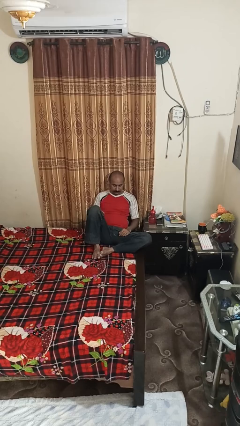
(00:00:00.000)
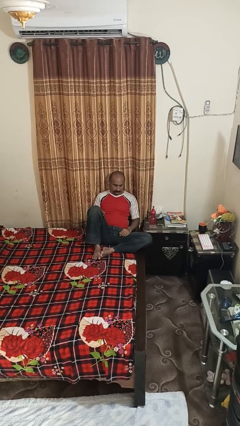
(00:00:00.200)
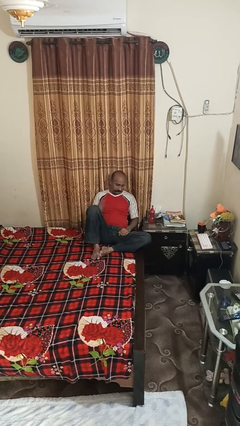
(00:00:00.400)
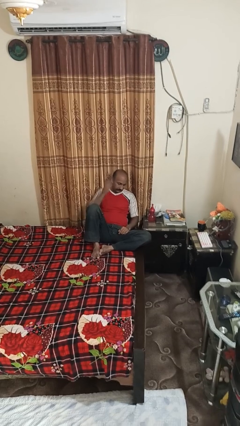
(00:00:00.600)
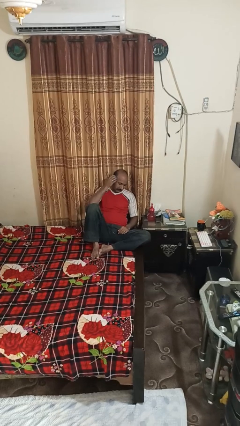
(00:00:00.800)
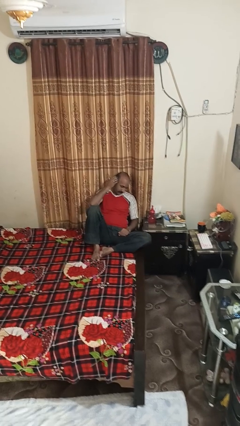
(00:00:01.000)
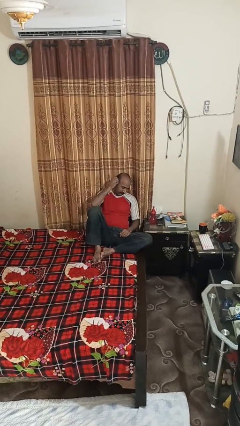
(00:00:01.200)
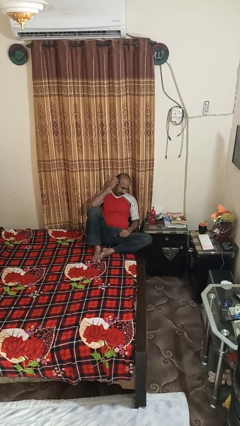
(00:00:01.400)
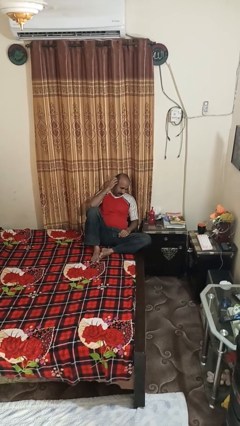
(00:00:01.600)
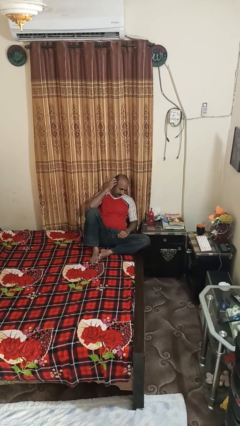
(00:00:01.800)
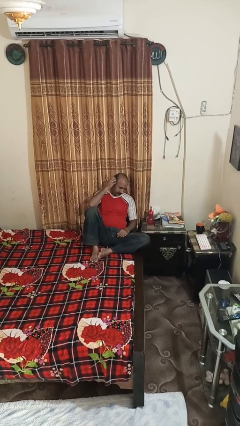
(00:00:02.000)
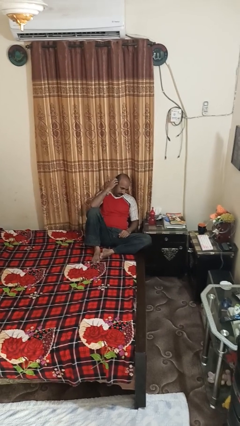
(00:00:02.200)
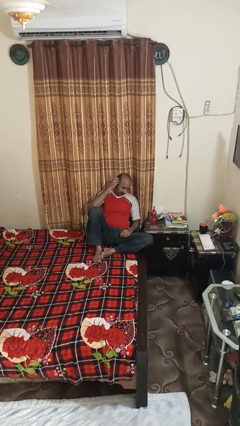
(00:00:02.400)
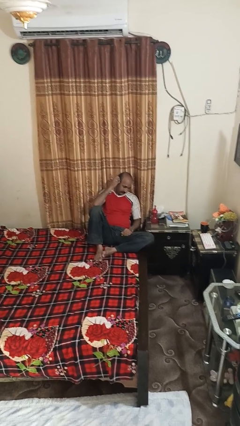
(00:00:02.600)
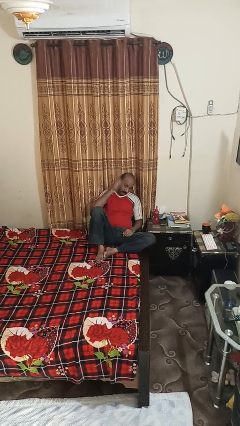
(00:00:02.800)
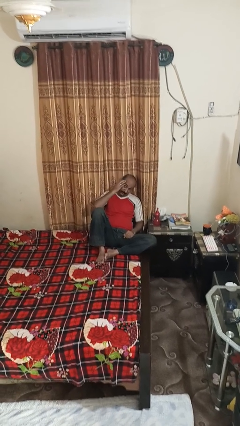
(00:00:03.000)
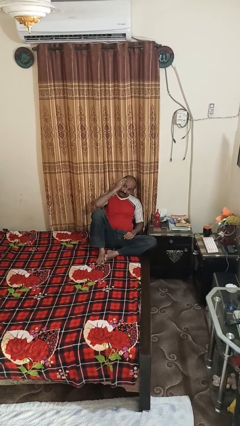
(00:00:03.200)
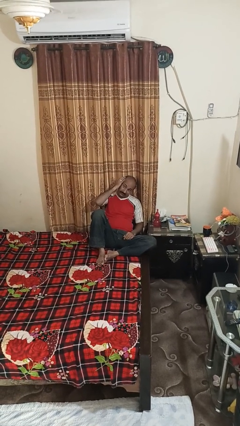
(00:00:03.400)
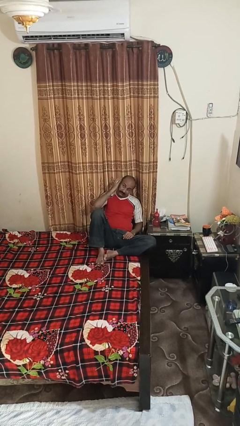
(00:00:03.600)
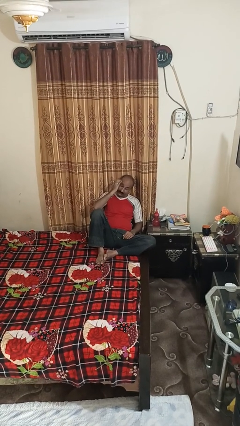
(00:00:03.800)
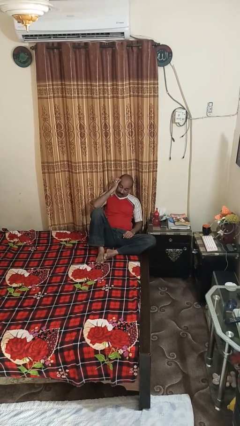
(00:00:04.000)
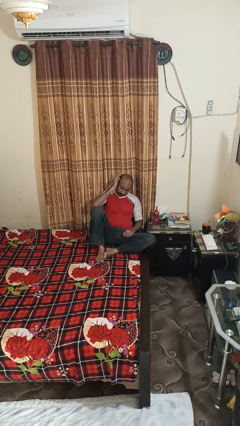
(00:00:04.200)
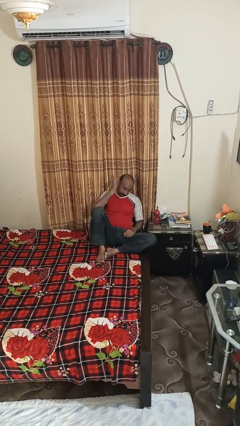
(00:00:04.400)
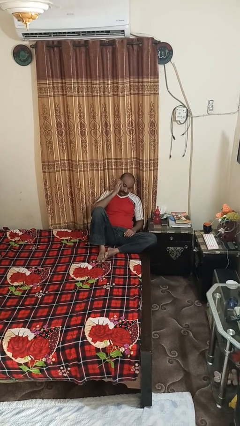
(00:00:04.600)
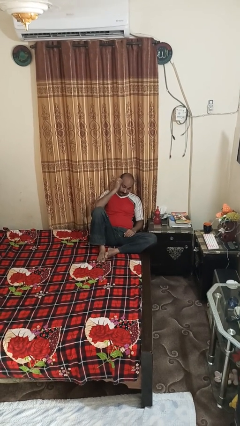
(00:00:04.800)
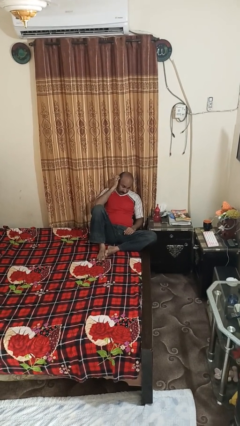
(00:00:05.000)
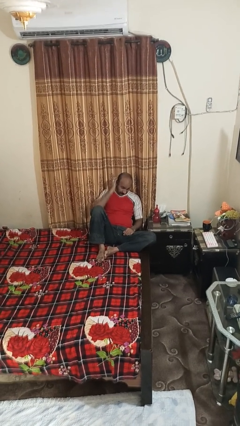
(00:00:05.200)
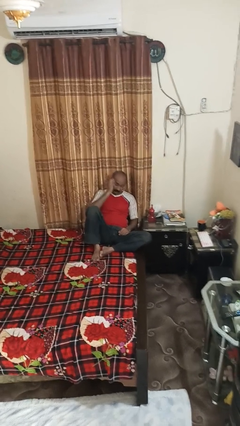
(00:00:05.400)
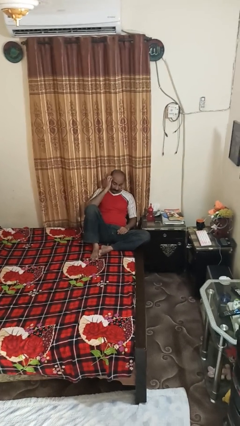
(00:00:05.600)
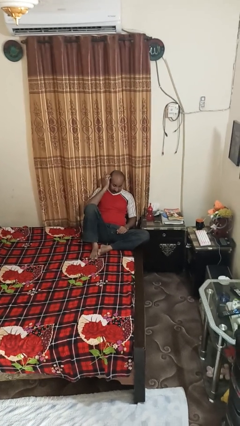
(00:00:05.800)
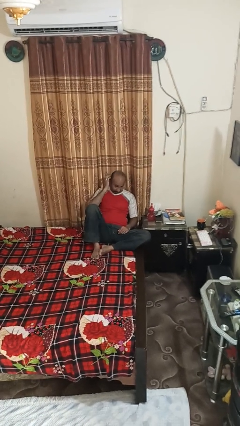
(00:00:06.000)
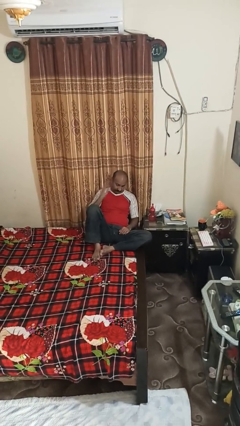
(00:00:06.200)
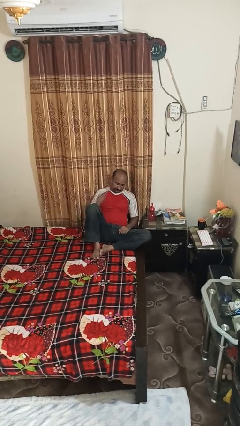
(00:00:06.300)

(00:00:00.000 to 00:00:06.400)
person strokes hair

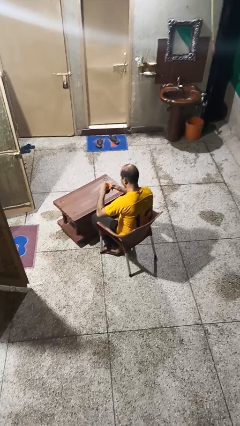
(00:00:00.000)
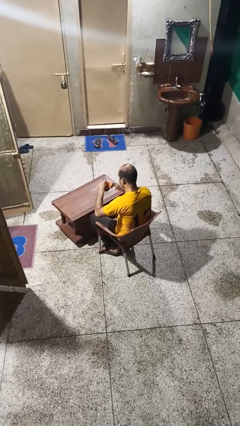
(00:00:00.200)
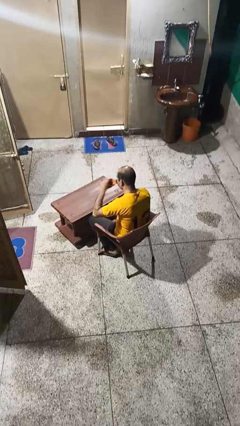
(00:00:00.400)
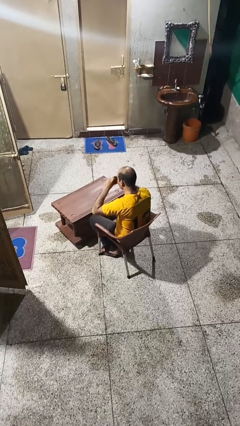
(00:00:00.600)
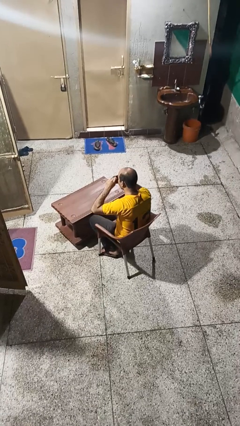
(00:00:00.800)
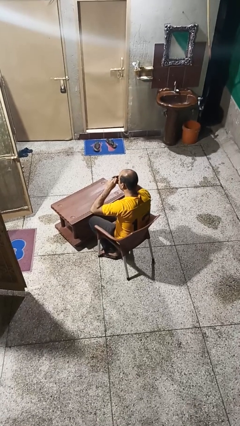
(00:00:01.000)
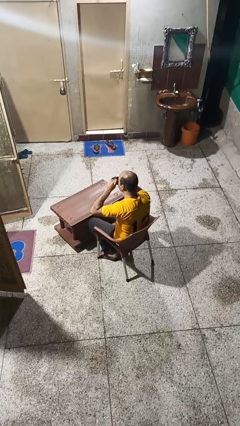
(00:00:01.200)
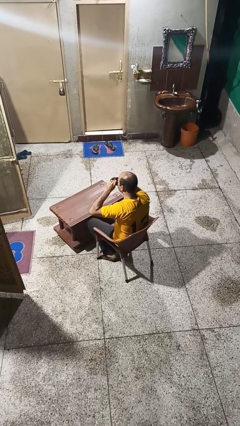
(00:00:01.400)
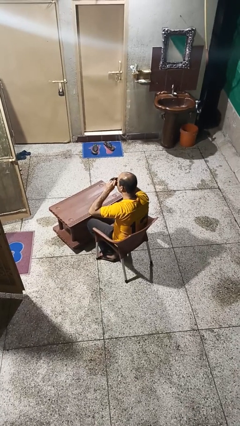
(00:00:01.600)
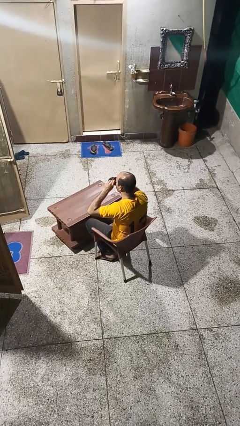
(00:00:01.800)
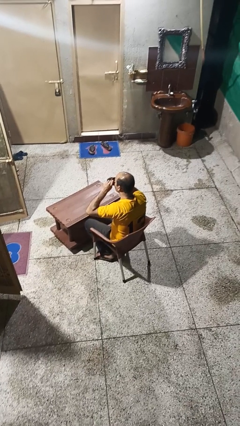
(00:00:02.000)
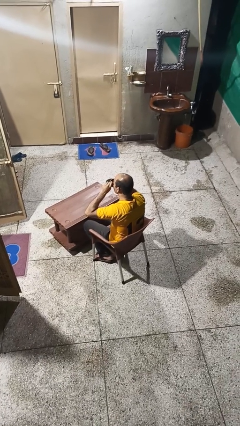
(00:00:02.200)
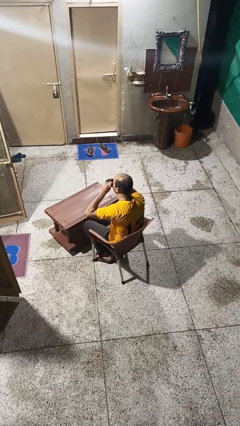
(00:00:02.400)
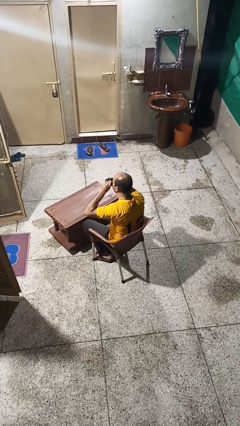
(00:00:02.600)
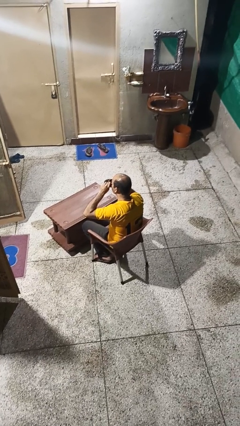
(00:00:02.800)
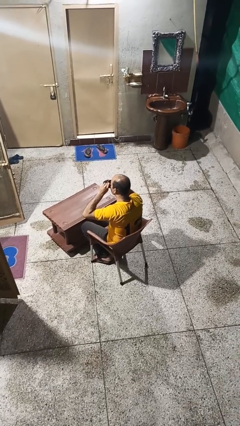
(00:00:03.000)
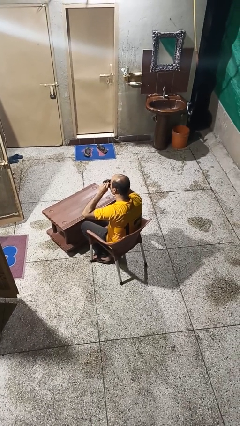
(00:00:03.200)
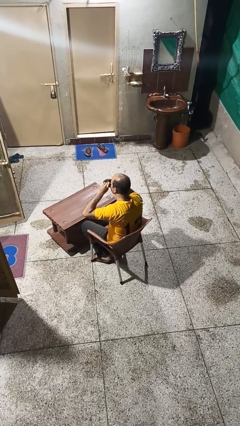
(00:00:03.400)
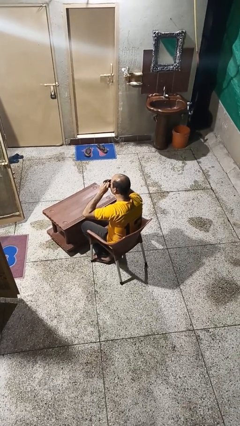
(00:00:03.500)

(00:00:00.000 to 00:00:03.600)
person drinks from mug

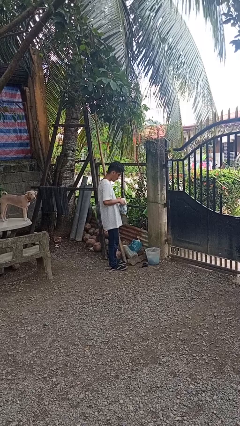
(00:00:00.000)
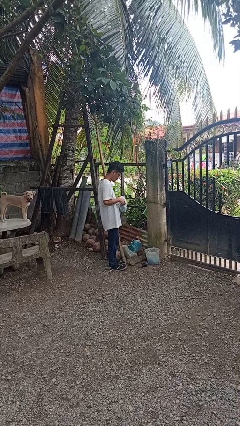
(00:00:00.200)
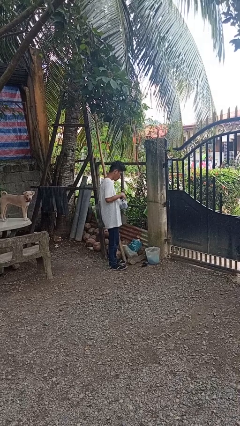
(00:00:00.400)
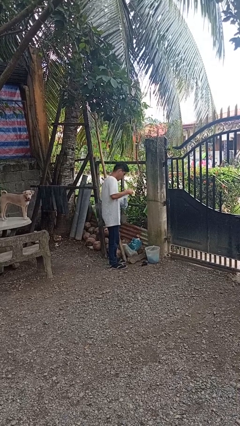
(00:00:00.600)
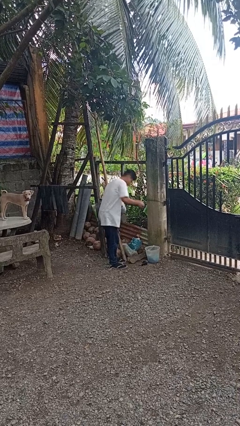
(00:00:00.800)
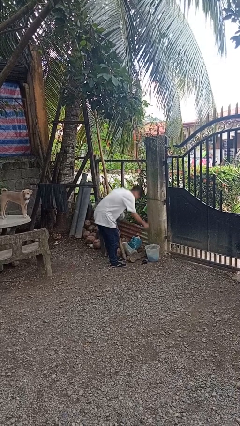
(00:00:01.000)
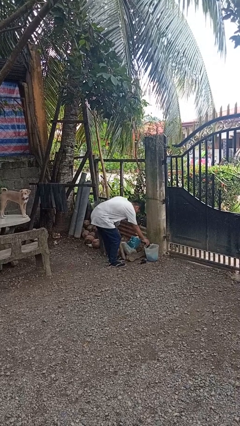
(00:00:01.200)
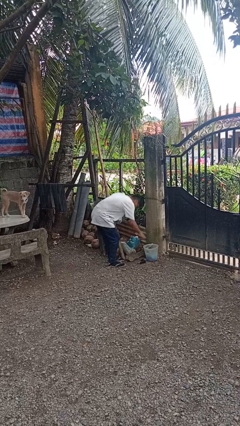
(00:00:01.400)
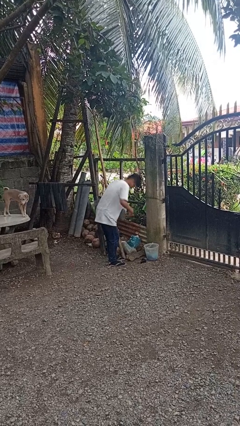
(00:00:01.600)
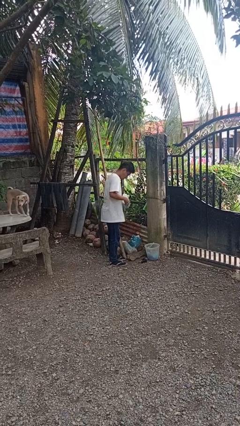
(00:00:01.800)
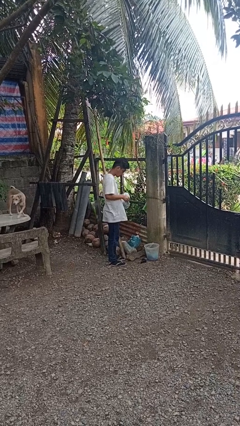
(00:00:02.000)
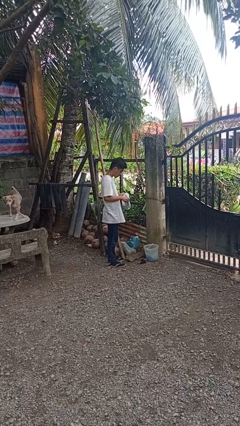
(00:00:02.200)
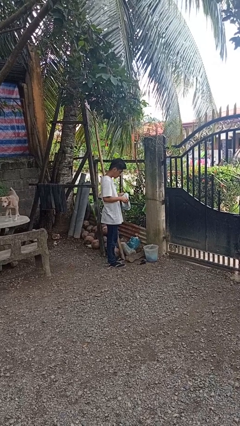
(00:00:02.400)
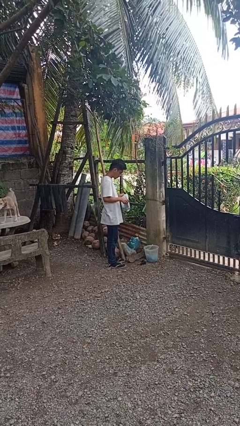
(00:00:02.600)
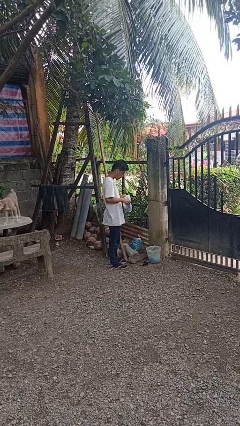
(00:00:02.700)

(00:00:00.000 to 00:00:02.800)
person discards trash

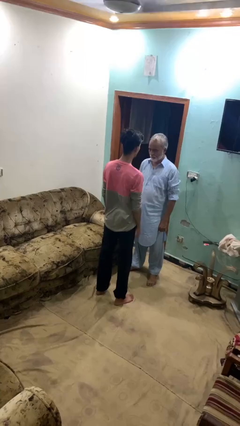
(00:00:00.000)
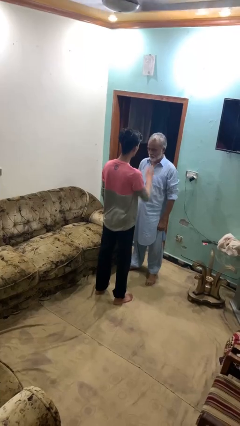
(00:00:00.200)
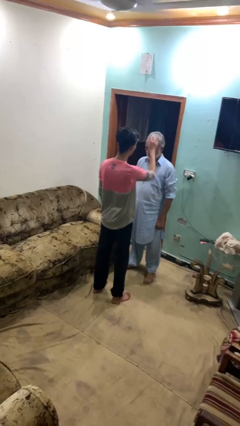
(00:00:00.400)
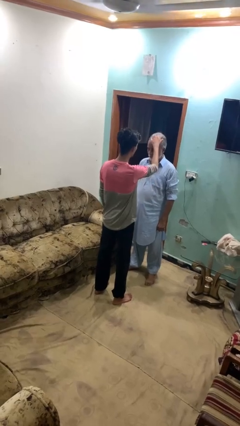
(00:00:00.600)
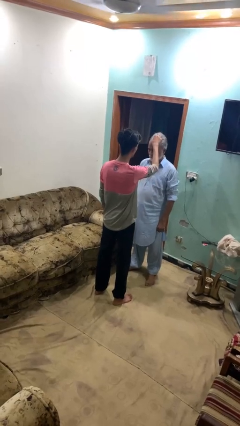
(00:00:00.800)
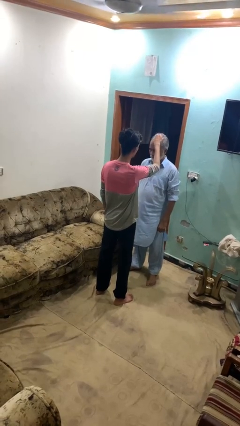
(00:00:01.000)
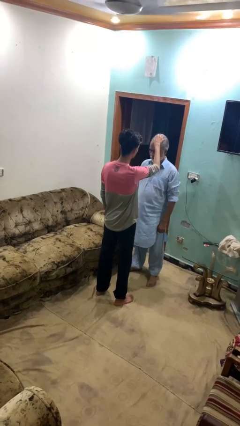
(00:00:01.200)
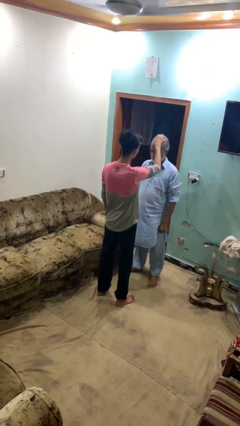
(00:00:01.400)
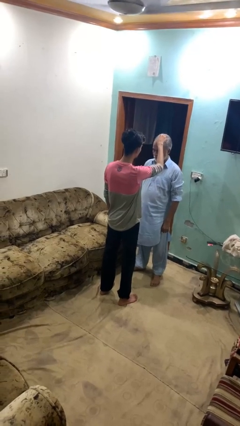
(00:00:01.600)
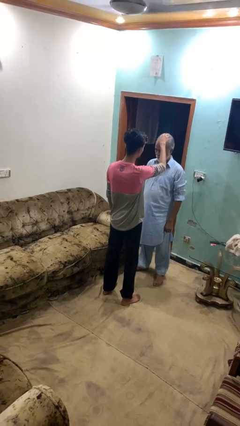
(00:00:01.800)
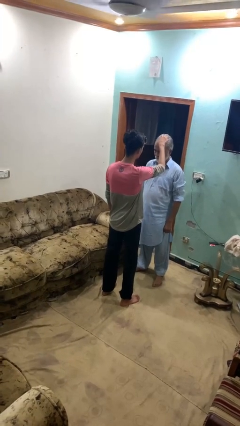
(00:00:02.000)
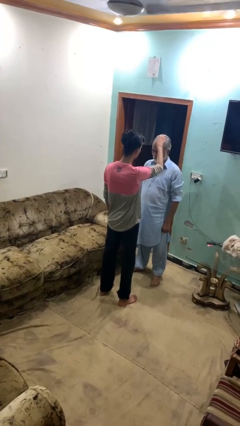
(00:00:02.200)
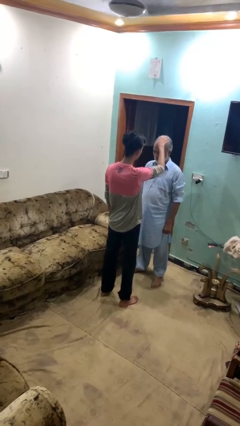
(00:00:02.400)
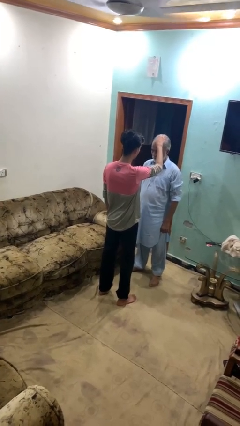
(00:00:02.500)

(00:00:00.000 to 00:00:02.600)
person grabs person by hair

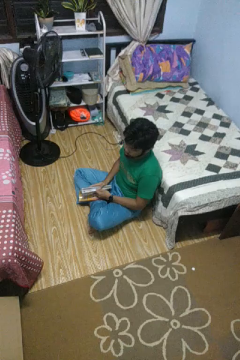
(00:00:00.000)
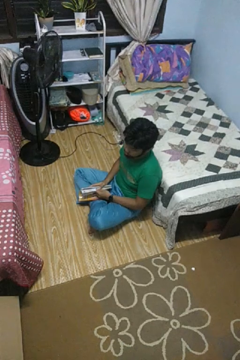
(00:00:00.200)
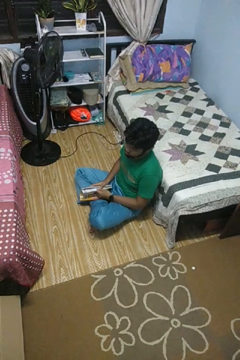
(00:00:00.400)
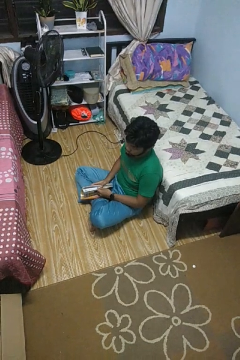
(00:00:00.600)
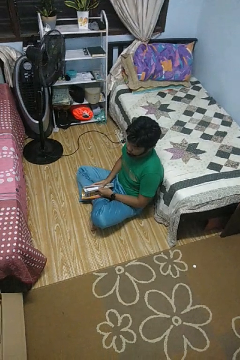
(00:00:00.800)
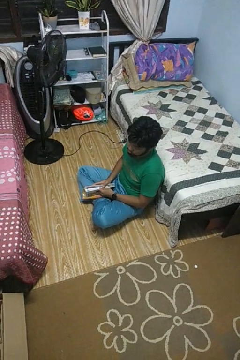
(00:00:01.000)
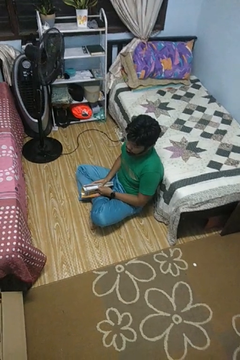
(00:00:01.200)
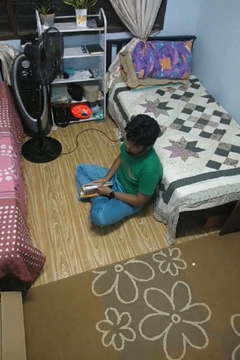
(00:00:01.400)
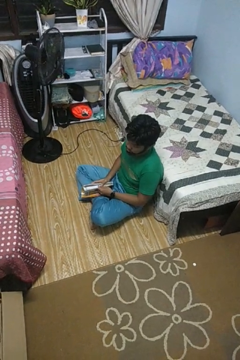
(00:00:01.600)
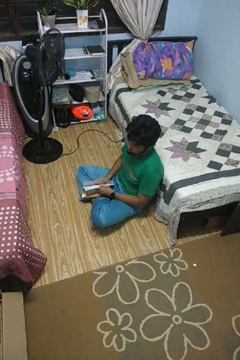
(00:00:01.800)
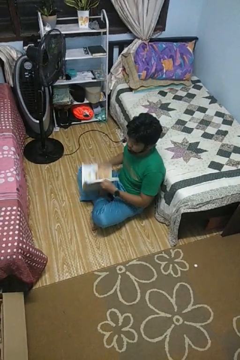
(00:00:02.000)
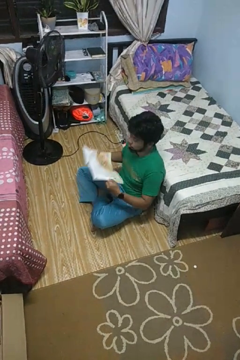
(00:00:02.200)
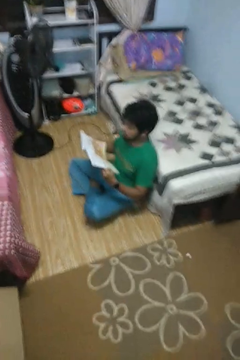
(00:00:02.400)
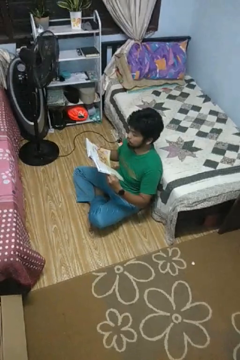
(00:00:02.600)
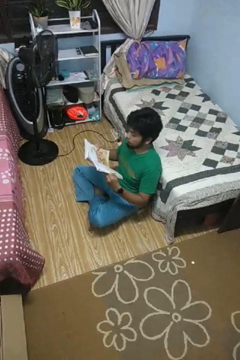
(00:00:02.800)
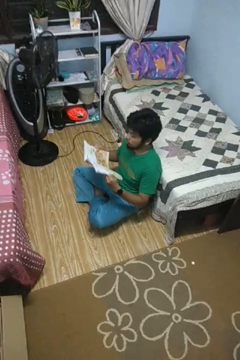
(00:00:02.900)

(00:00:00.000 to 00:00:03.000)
person reads magazine
